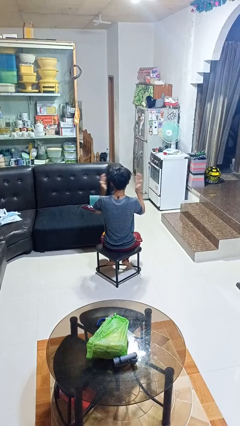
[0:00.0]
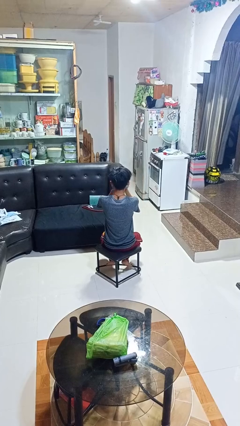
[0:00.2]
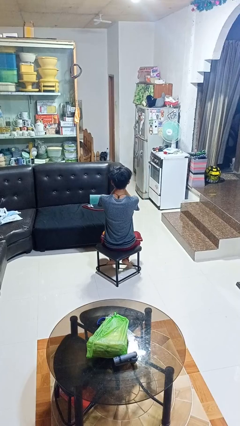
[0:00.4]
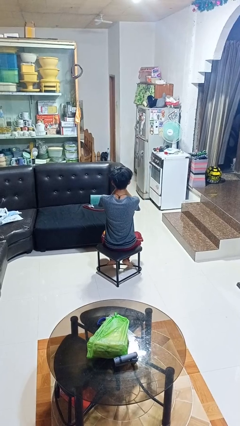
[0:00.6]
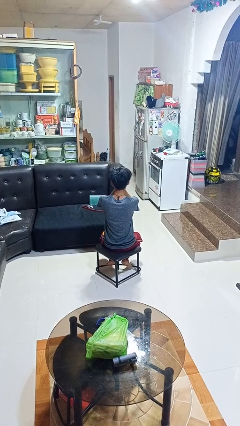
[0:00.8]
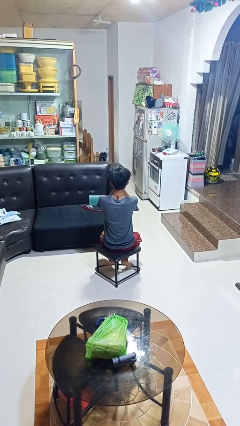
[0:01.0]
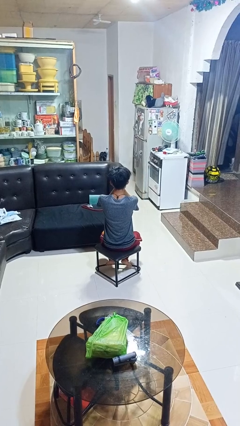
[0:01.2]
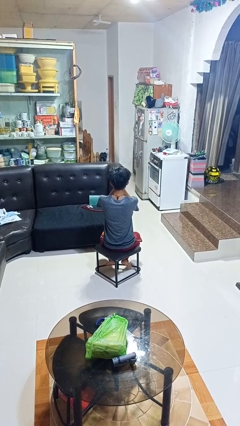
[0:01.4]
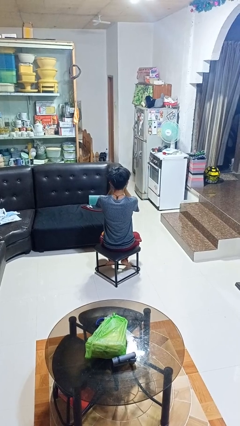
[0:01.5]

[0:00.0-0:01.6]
person covers face with hands

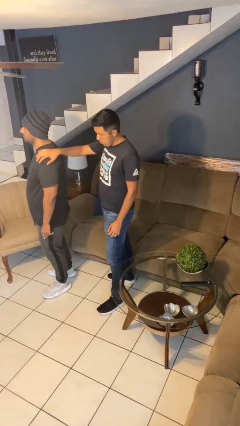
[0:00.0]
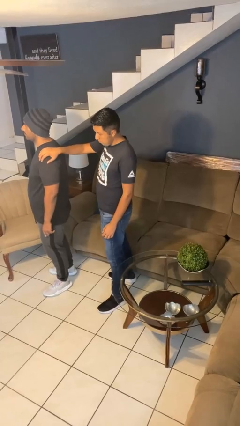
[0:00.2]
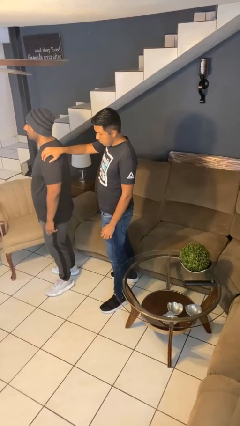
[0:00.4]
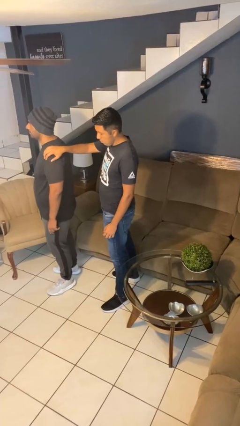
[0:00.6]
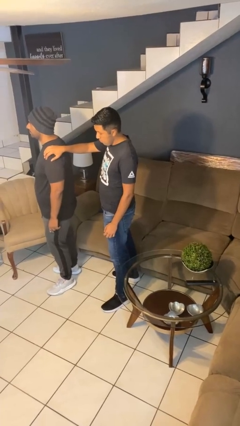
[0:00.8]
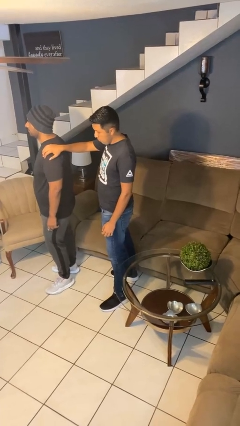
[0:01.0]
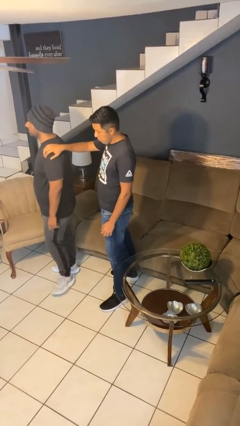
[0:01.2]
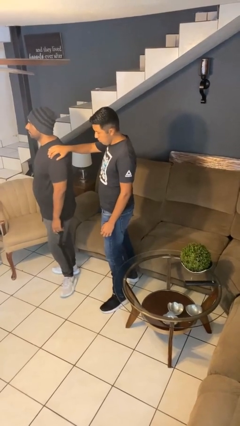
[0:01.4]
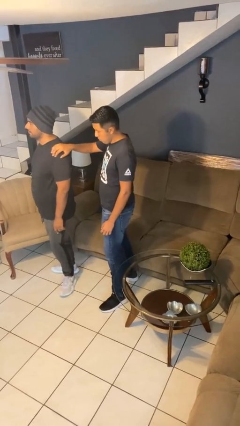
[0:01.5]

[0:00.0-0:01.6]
person grabs person by shoulder

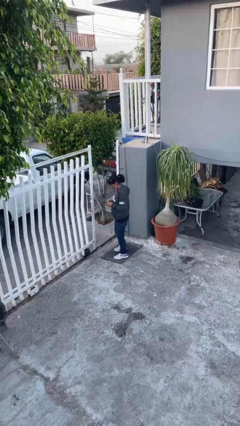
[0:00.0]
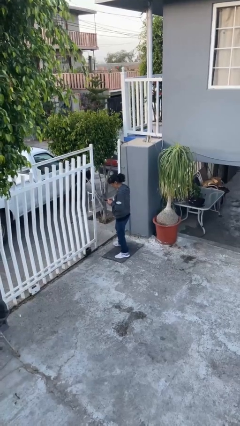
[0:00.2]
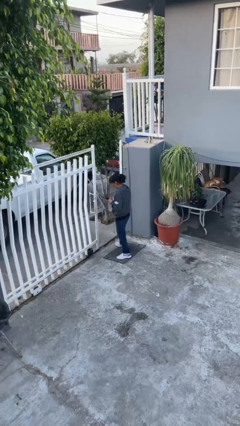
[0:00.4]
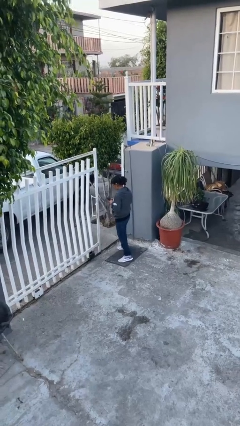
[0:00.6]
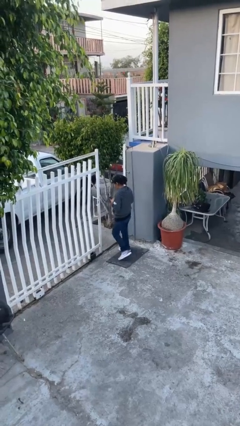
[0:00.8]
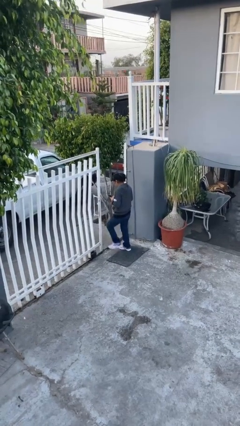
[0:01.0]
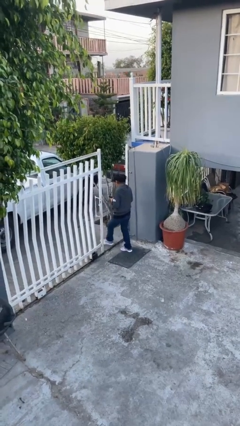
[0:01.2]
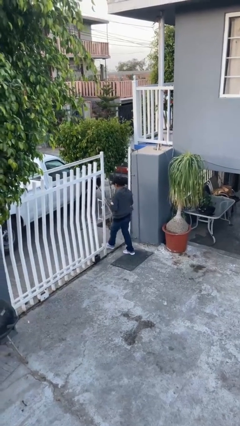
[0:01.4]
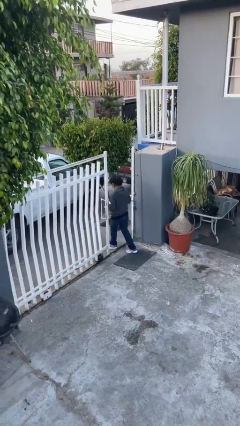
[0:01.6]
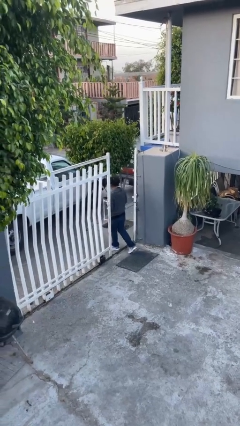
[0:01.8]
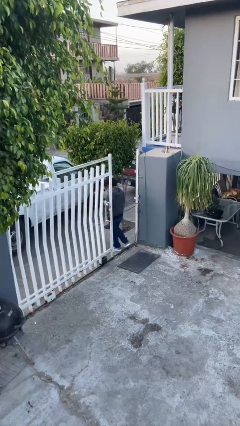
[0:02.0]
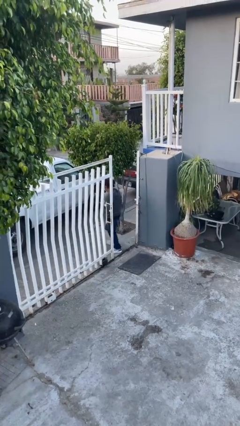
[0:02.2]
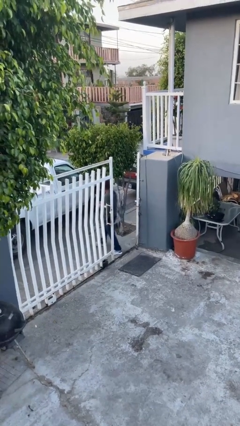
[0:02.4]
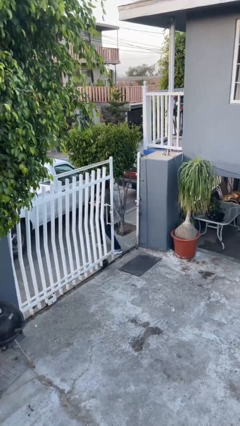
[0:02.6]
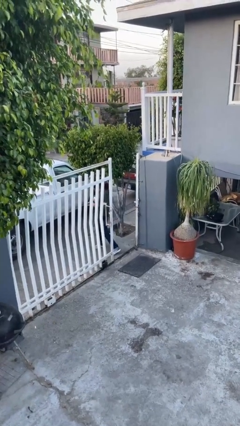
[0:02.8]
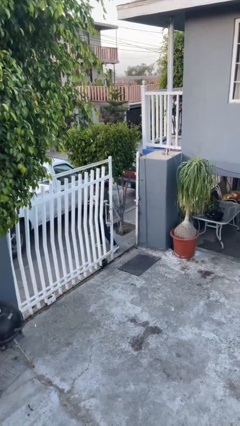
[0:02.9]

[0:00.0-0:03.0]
person exits scene through structure

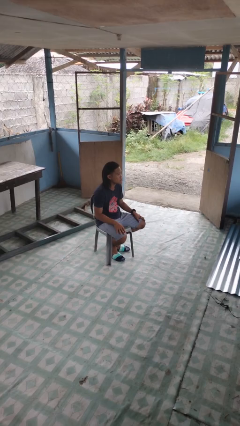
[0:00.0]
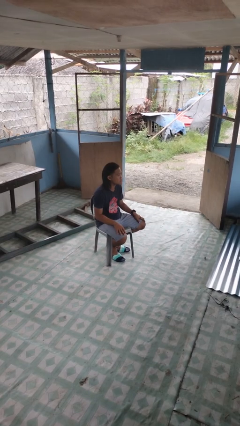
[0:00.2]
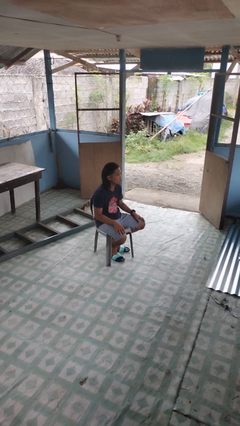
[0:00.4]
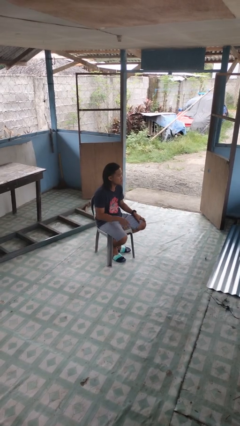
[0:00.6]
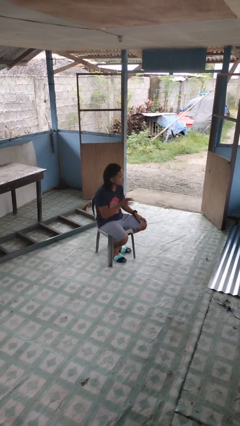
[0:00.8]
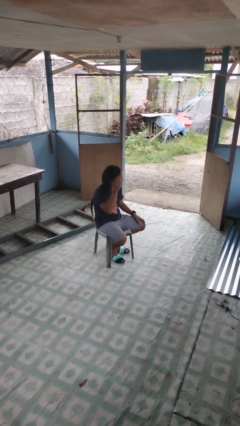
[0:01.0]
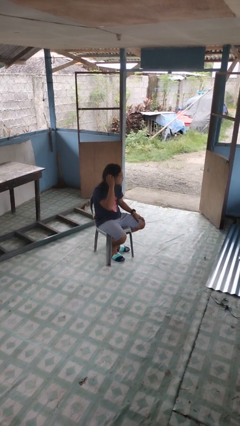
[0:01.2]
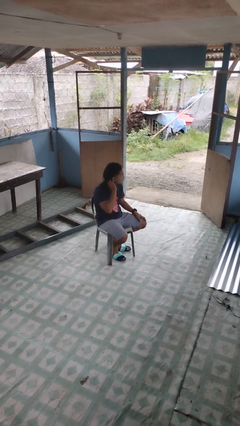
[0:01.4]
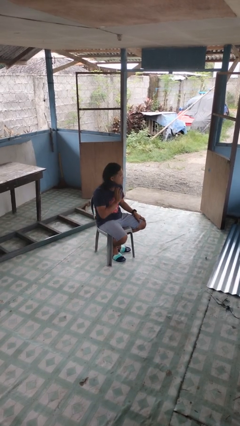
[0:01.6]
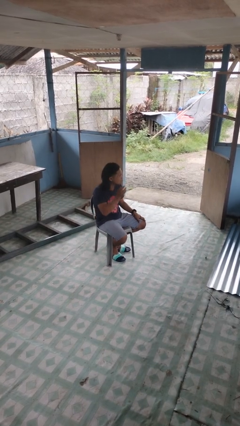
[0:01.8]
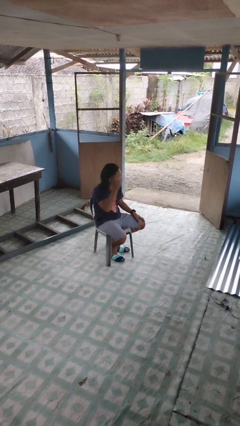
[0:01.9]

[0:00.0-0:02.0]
person strokes hair

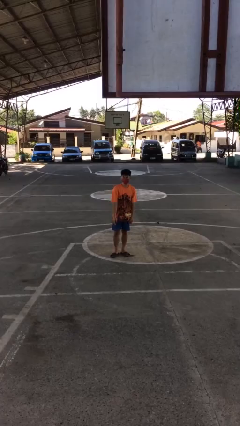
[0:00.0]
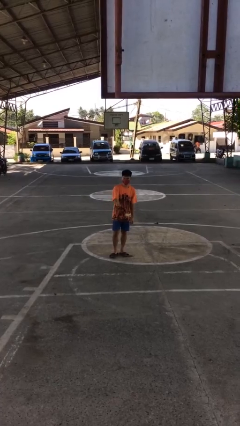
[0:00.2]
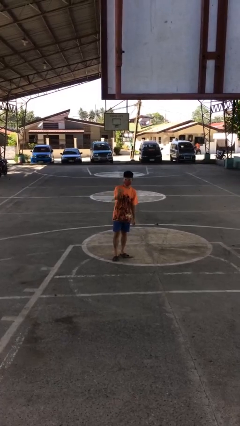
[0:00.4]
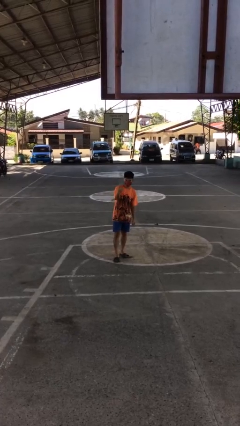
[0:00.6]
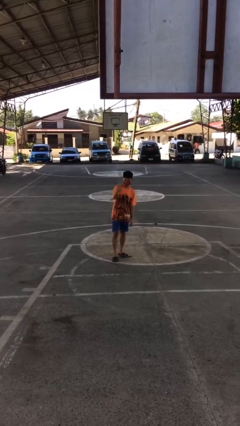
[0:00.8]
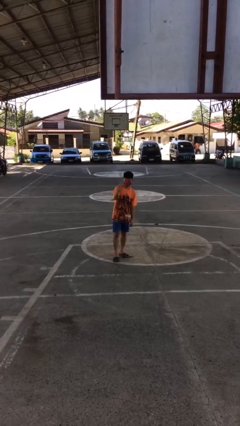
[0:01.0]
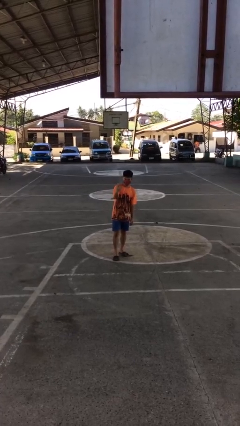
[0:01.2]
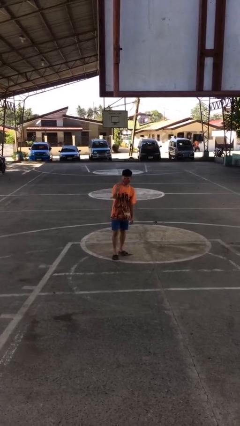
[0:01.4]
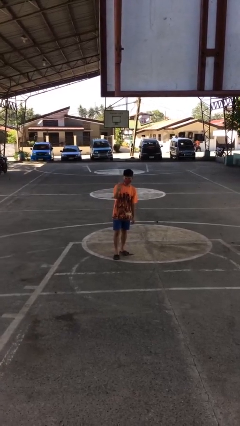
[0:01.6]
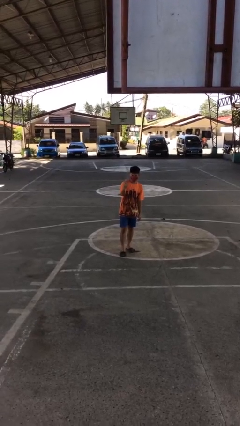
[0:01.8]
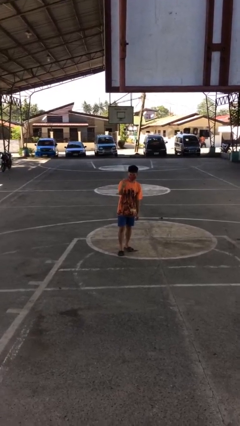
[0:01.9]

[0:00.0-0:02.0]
person gestures come here

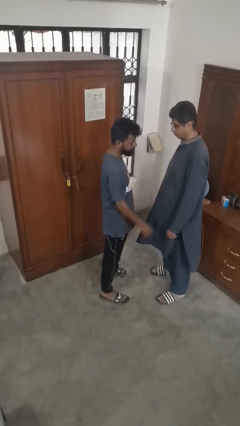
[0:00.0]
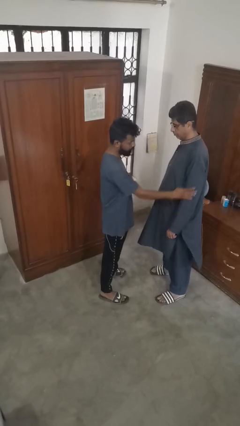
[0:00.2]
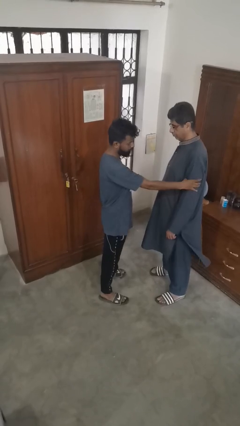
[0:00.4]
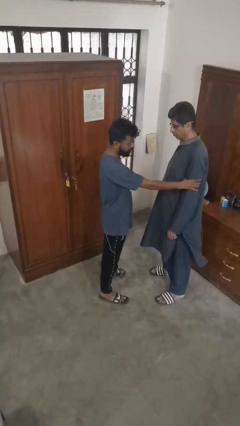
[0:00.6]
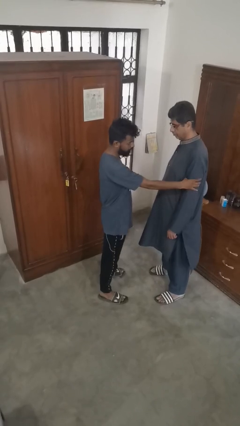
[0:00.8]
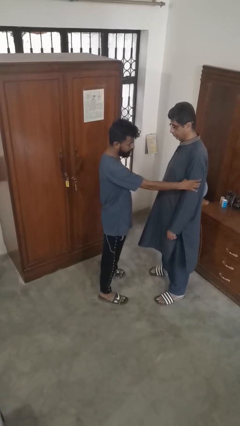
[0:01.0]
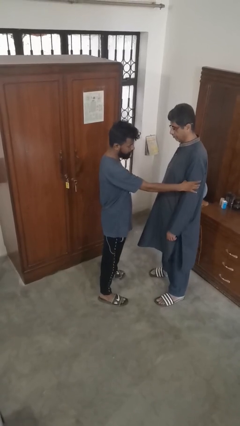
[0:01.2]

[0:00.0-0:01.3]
person grabs person by bicep

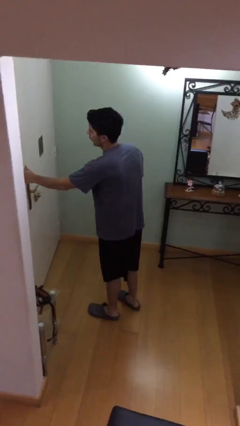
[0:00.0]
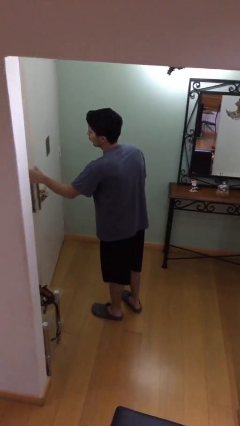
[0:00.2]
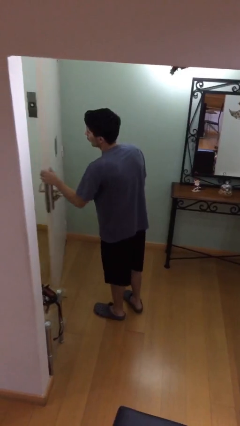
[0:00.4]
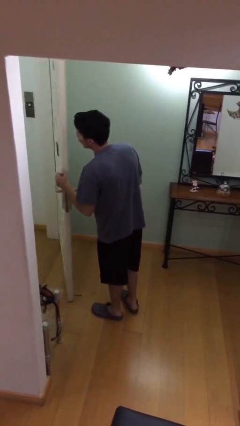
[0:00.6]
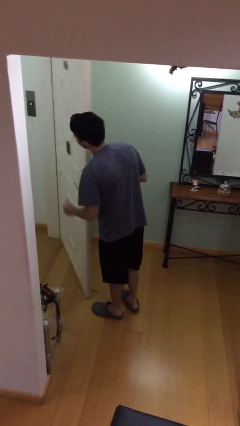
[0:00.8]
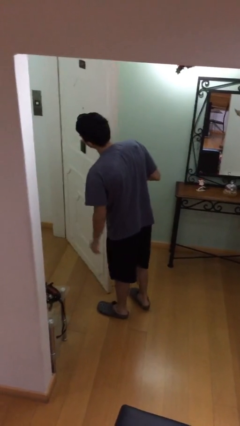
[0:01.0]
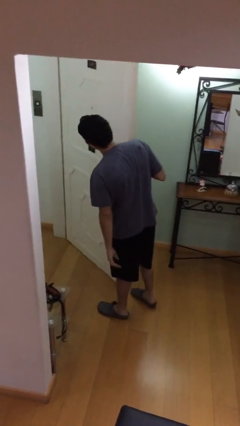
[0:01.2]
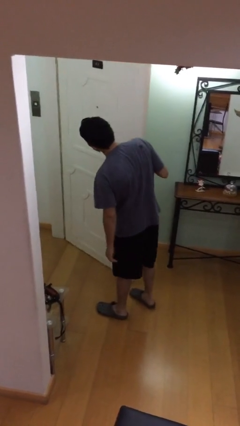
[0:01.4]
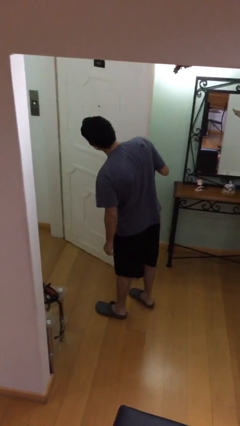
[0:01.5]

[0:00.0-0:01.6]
person opens facility door

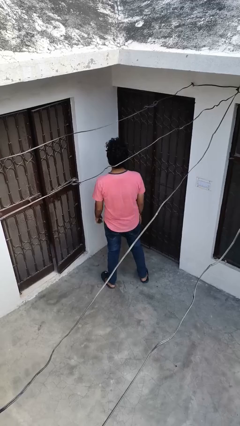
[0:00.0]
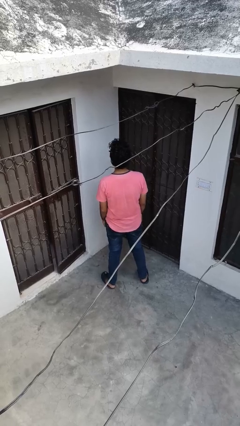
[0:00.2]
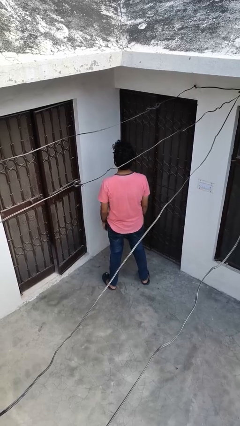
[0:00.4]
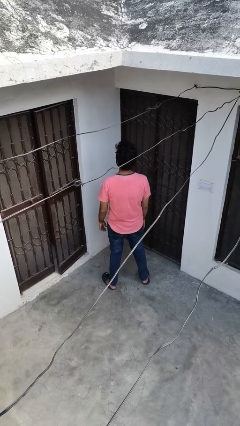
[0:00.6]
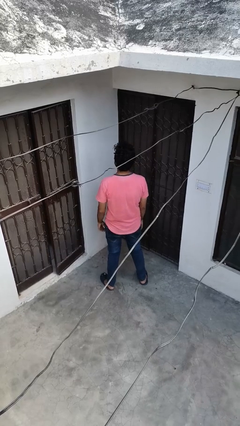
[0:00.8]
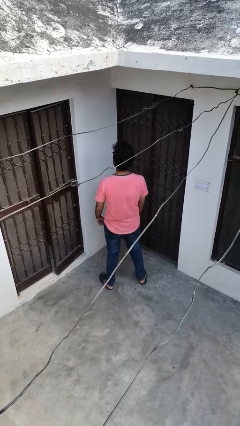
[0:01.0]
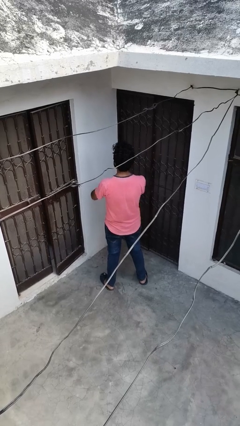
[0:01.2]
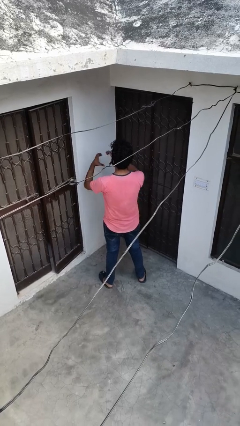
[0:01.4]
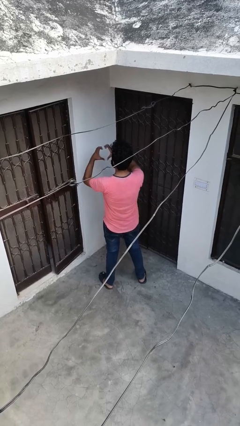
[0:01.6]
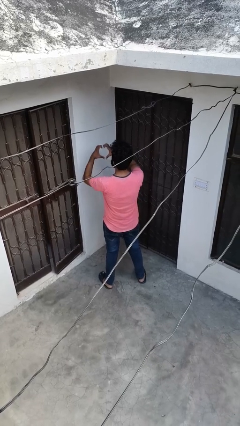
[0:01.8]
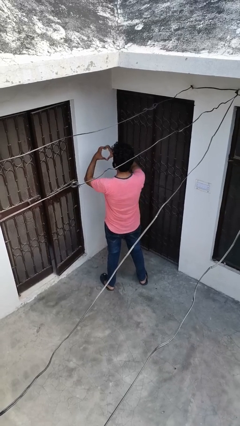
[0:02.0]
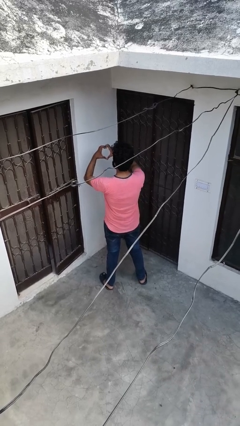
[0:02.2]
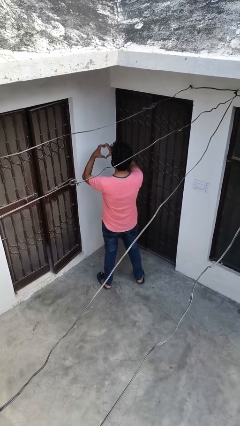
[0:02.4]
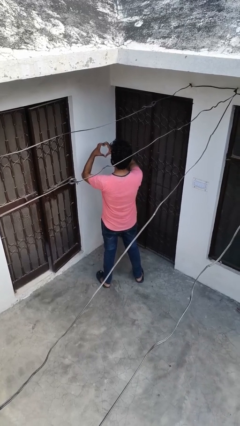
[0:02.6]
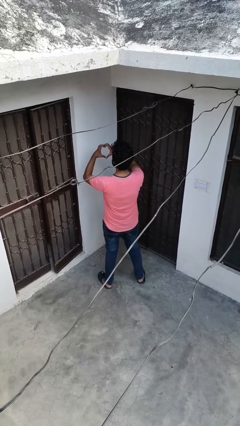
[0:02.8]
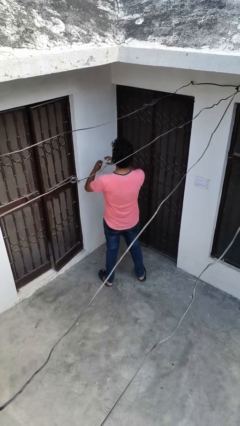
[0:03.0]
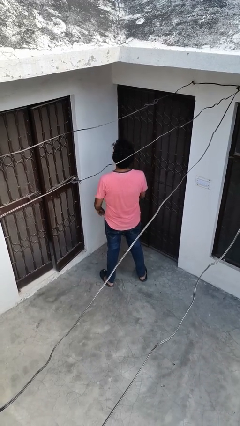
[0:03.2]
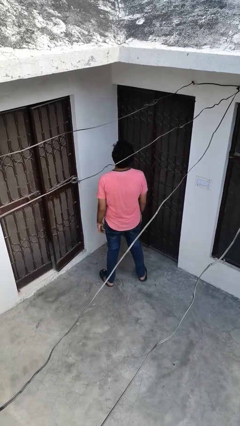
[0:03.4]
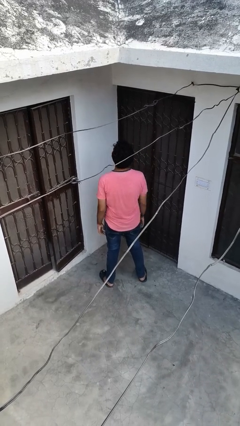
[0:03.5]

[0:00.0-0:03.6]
person gestures heart

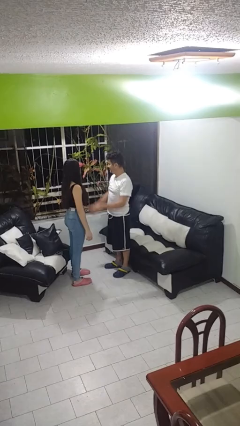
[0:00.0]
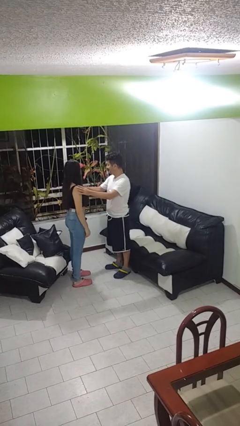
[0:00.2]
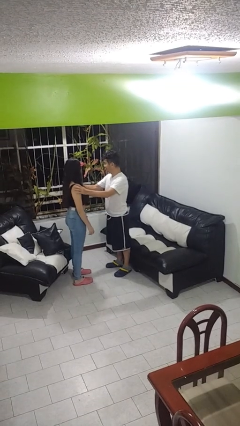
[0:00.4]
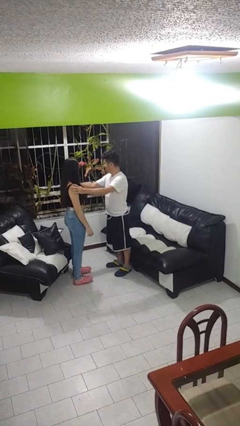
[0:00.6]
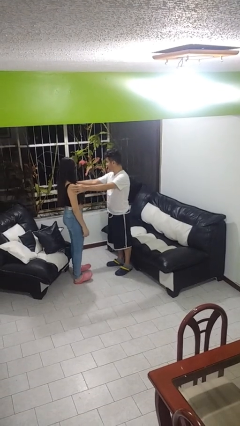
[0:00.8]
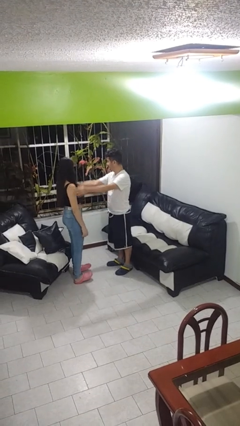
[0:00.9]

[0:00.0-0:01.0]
person shoves person
